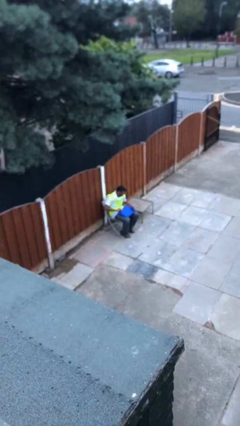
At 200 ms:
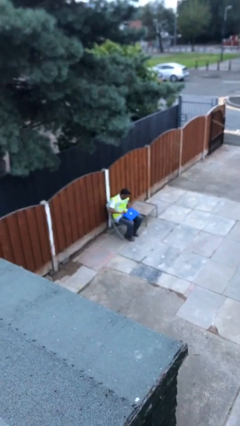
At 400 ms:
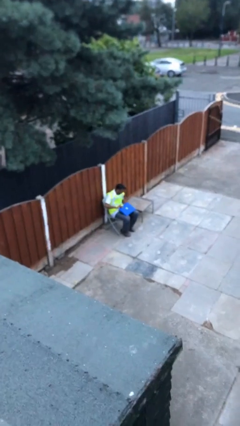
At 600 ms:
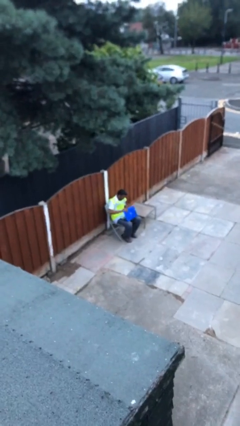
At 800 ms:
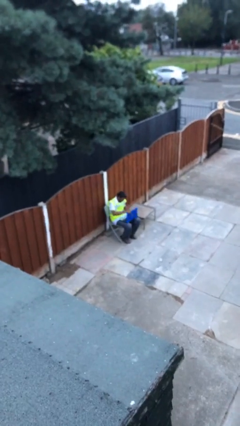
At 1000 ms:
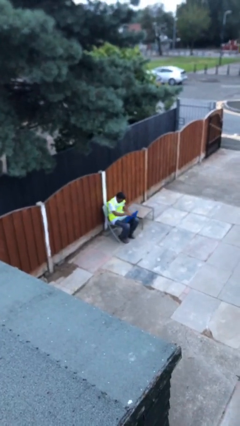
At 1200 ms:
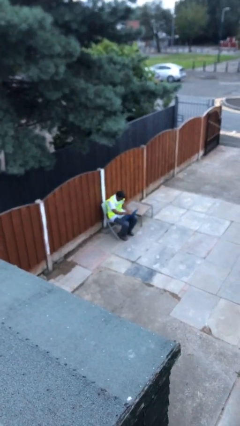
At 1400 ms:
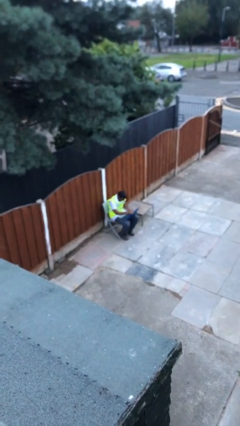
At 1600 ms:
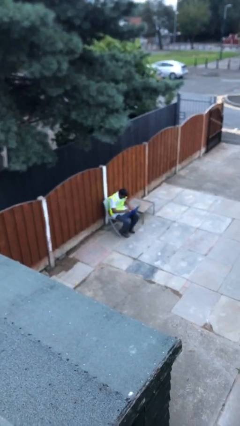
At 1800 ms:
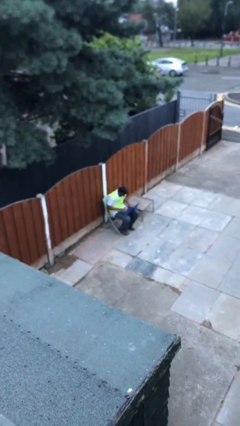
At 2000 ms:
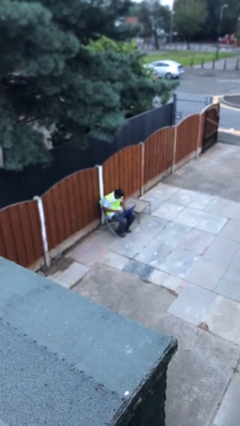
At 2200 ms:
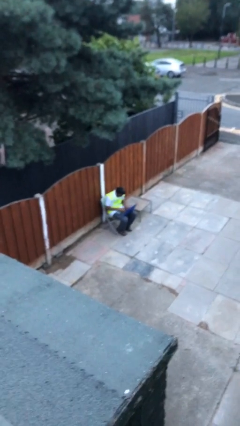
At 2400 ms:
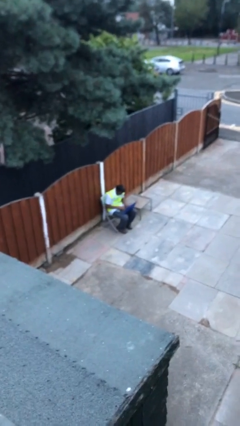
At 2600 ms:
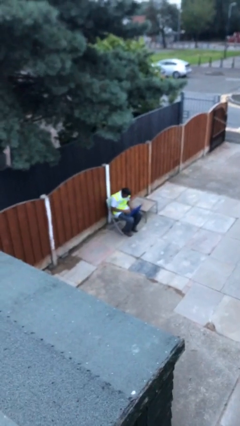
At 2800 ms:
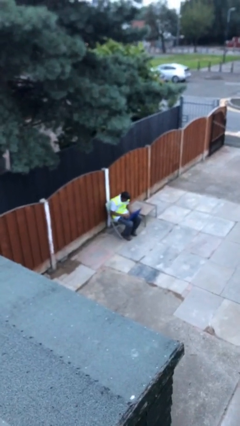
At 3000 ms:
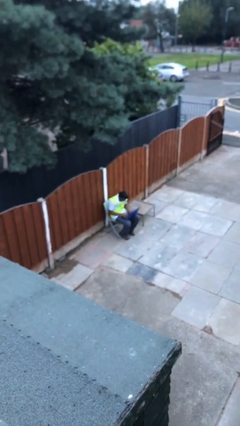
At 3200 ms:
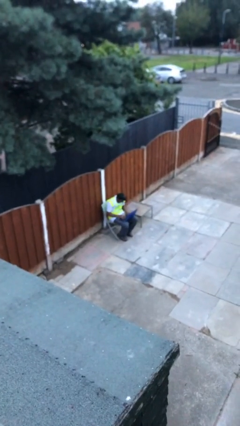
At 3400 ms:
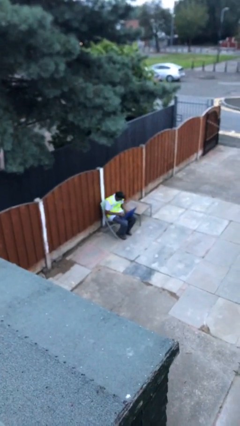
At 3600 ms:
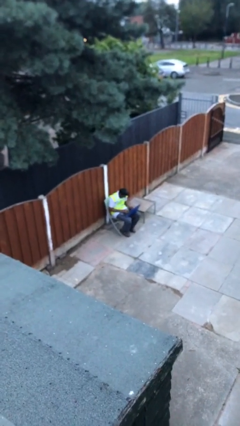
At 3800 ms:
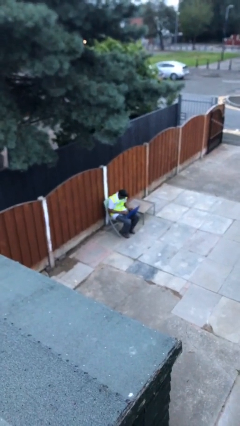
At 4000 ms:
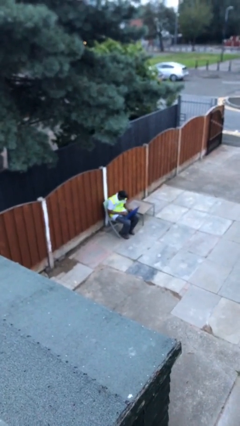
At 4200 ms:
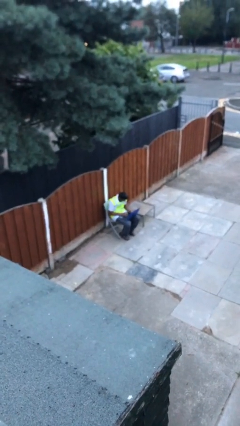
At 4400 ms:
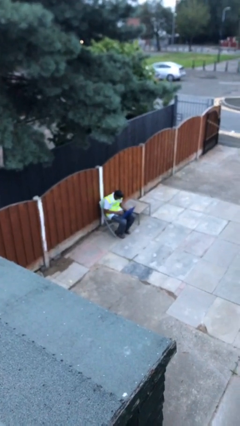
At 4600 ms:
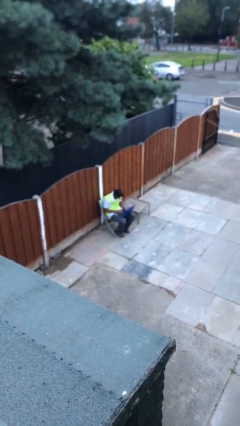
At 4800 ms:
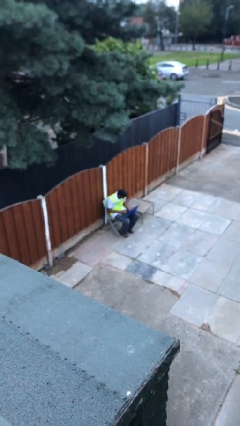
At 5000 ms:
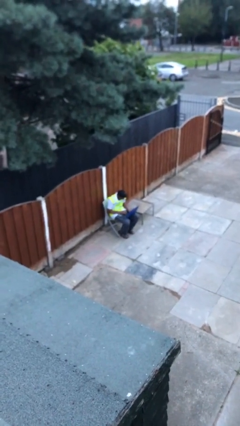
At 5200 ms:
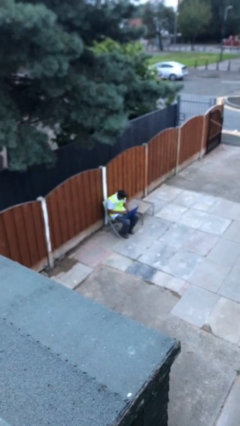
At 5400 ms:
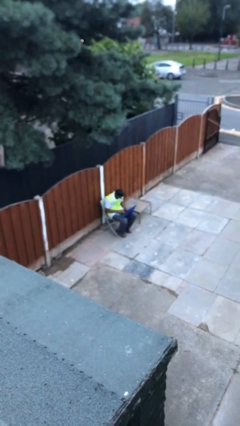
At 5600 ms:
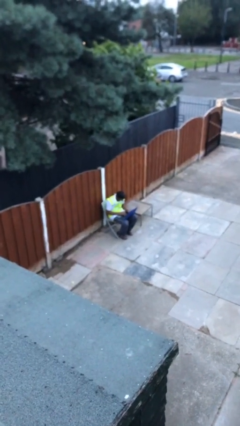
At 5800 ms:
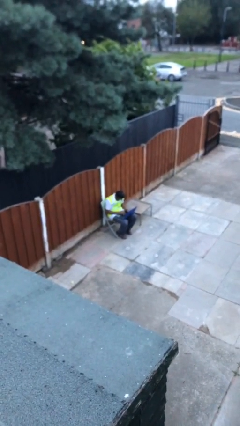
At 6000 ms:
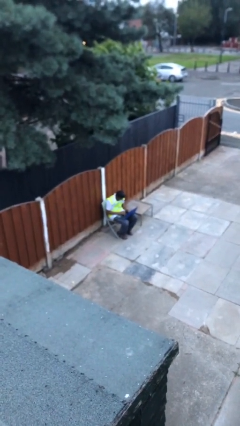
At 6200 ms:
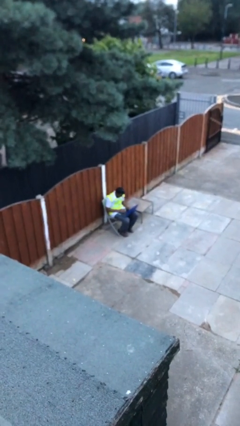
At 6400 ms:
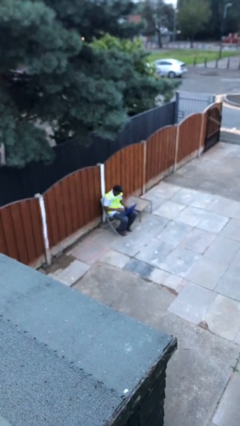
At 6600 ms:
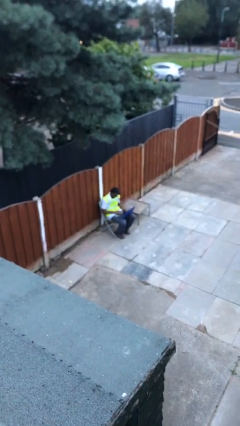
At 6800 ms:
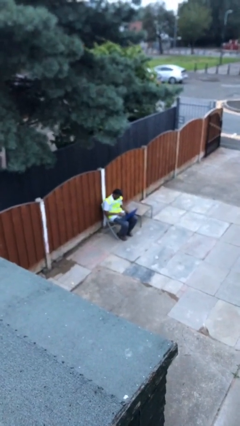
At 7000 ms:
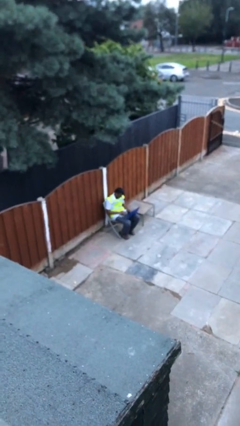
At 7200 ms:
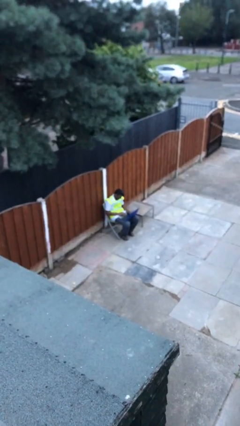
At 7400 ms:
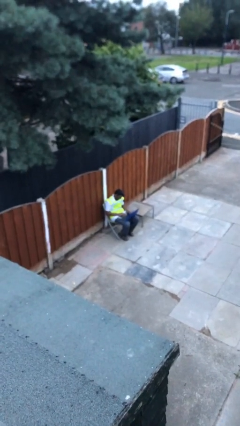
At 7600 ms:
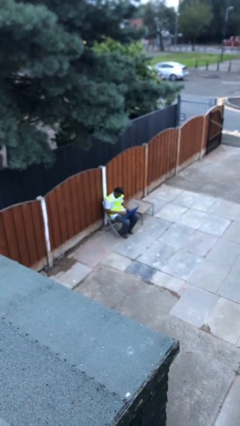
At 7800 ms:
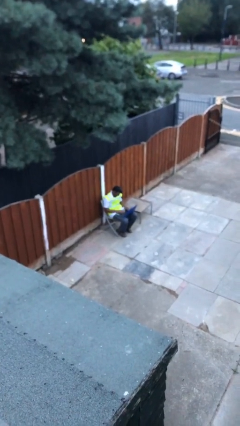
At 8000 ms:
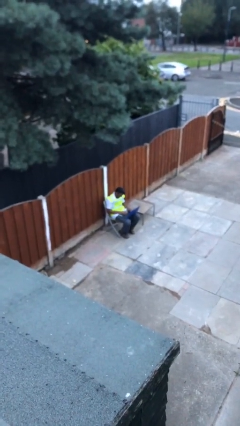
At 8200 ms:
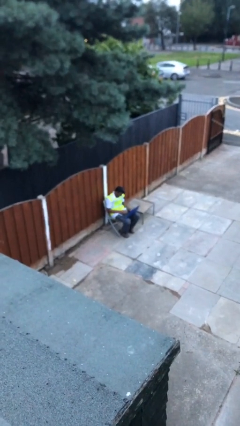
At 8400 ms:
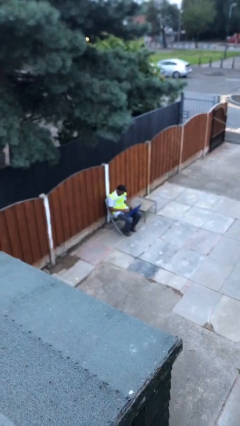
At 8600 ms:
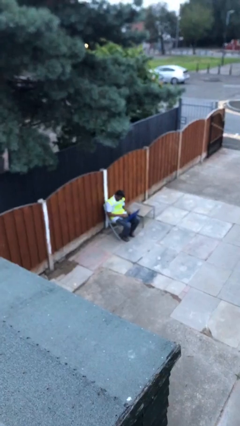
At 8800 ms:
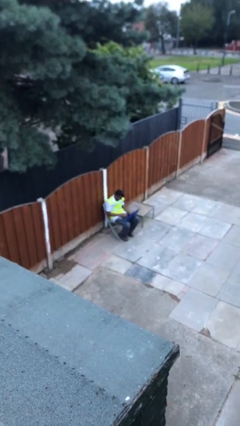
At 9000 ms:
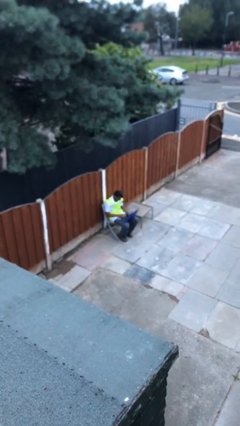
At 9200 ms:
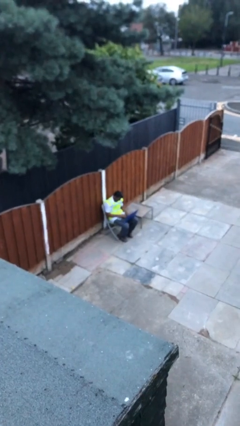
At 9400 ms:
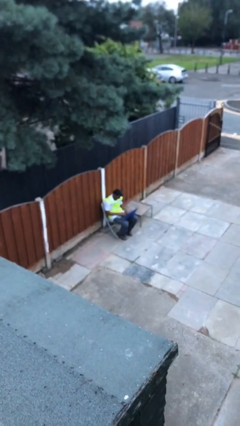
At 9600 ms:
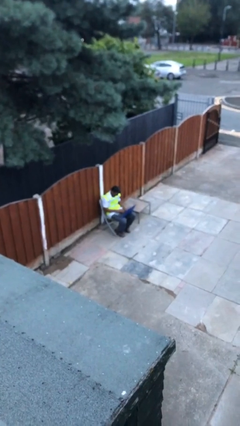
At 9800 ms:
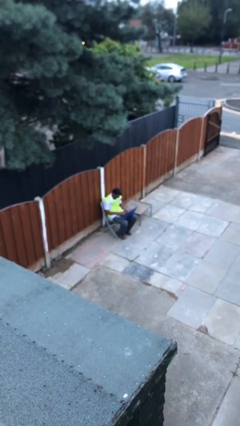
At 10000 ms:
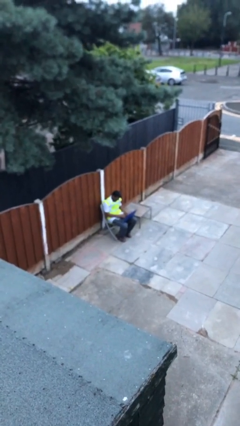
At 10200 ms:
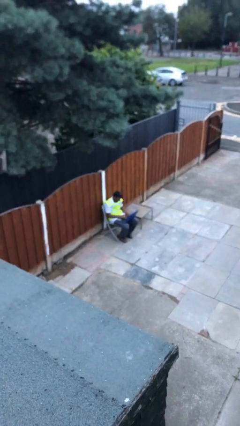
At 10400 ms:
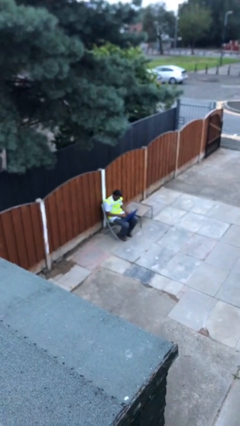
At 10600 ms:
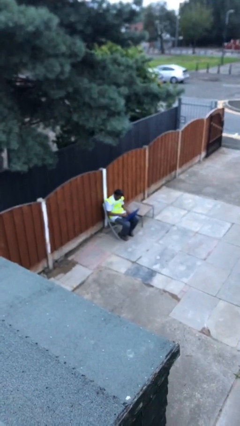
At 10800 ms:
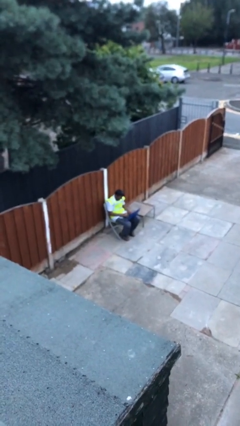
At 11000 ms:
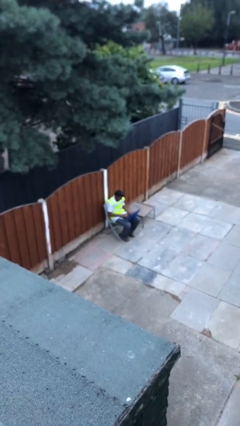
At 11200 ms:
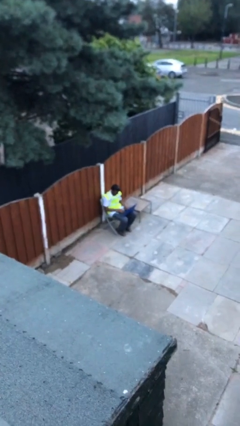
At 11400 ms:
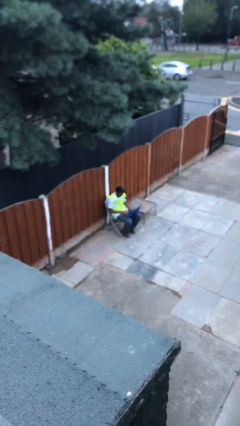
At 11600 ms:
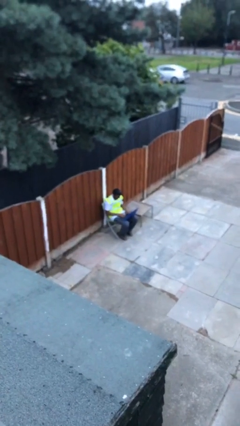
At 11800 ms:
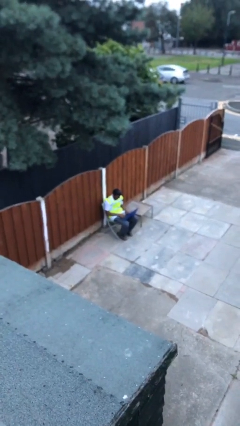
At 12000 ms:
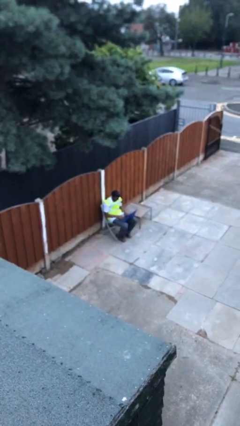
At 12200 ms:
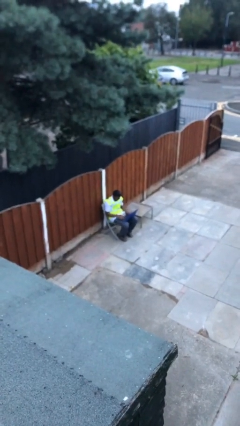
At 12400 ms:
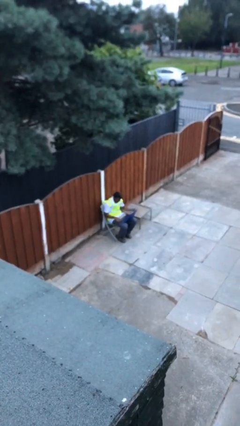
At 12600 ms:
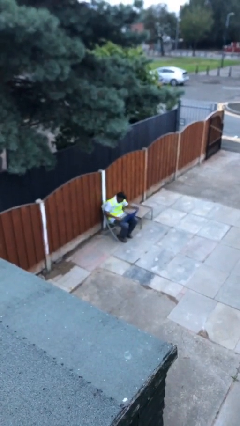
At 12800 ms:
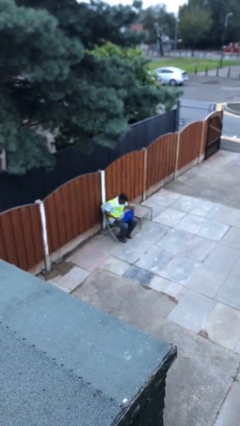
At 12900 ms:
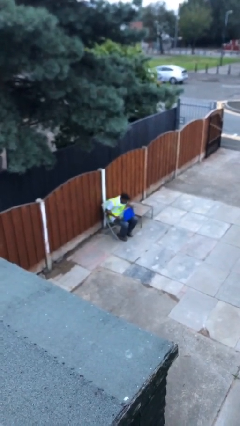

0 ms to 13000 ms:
person interacts with laptop

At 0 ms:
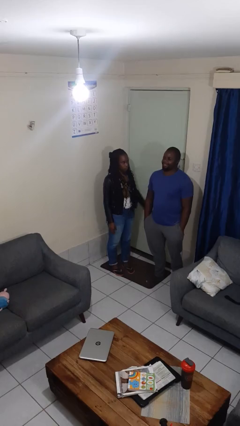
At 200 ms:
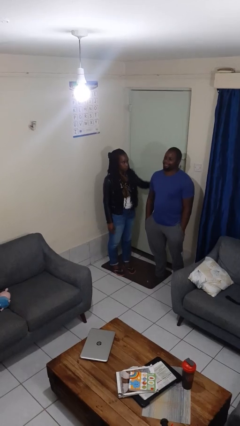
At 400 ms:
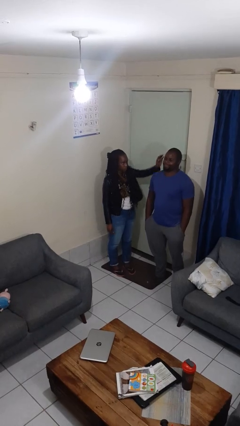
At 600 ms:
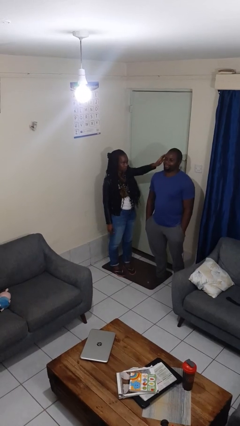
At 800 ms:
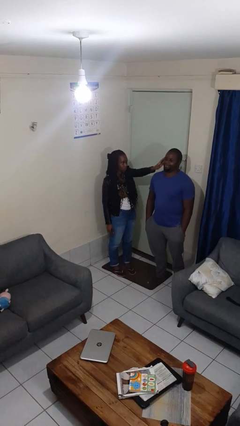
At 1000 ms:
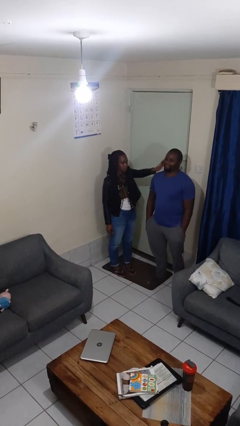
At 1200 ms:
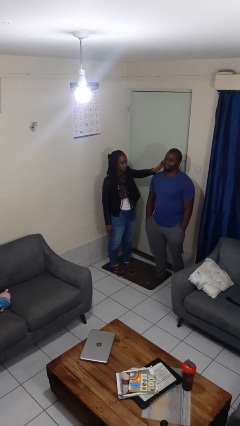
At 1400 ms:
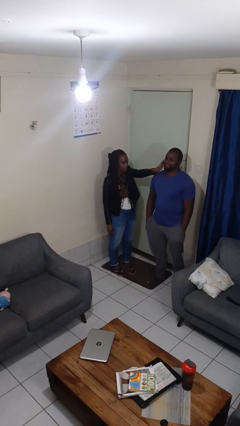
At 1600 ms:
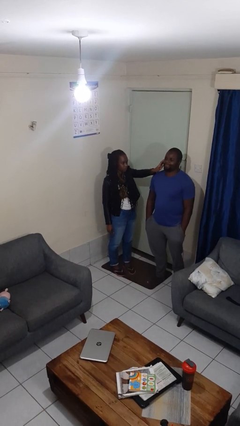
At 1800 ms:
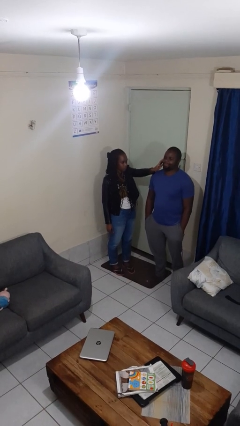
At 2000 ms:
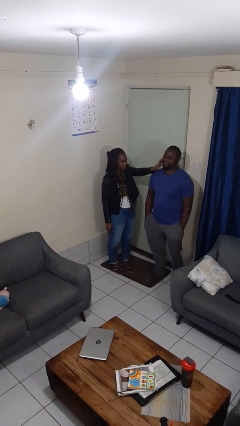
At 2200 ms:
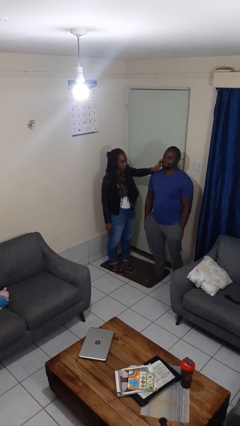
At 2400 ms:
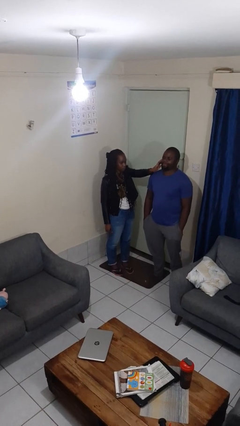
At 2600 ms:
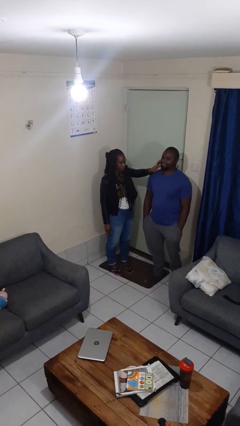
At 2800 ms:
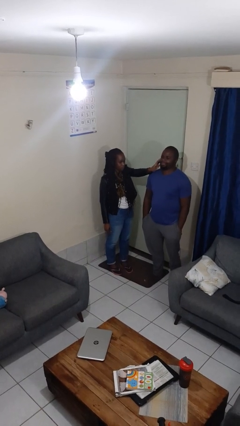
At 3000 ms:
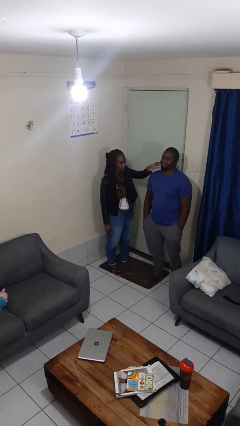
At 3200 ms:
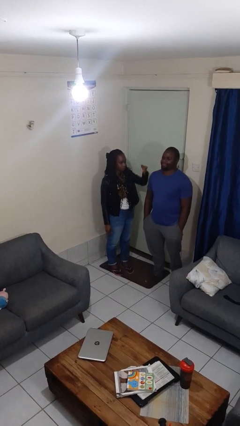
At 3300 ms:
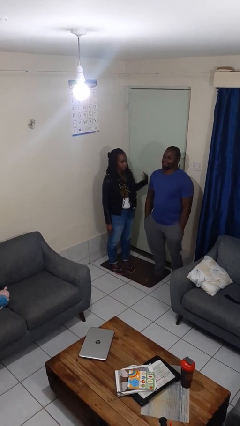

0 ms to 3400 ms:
person touches face of person

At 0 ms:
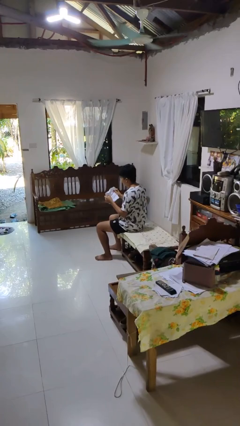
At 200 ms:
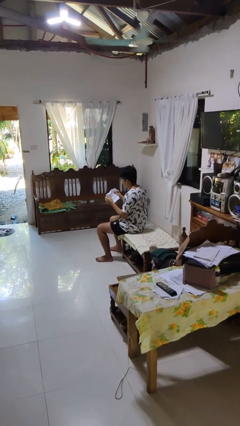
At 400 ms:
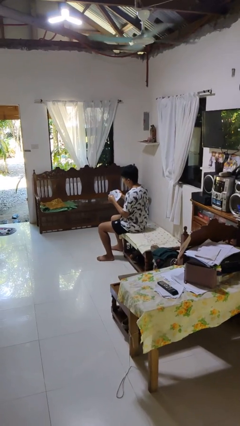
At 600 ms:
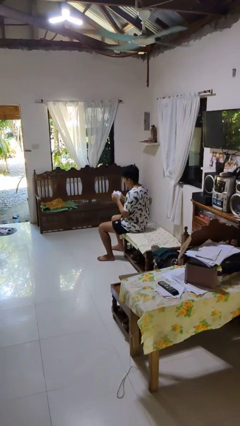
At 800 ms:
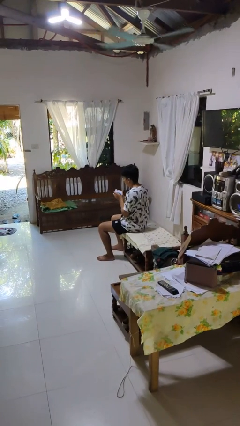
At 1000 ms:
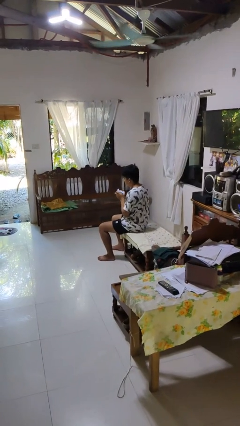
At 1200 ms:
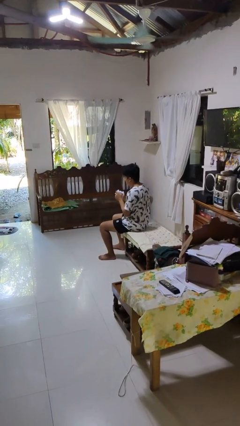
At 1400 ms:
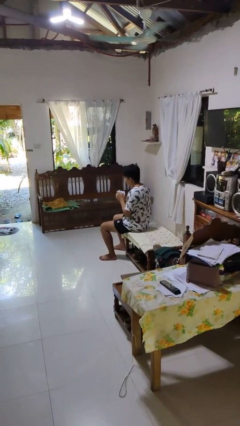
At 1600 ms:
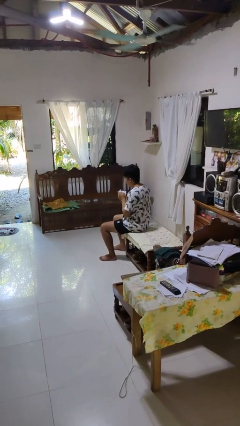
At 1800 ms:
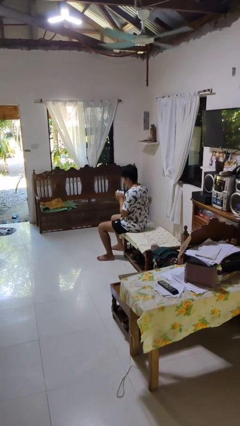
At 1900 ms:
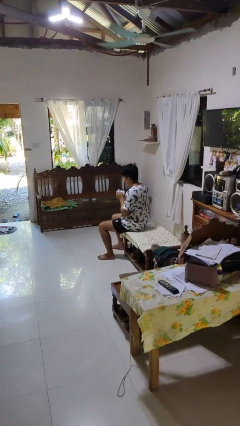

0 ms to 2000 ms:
person crumples paper
